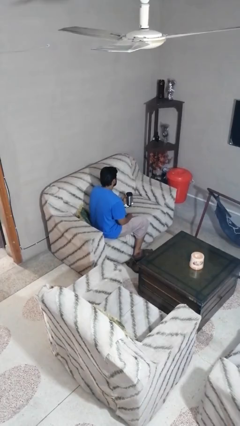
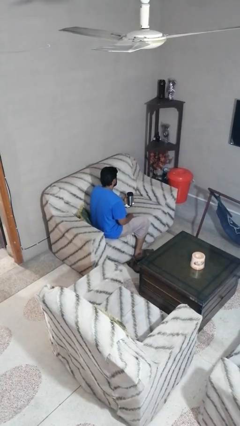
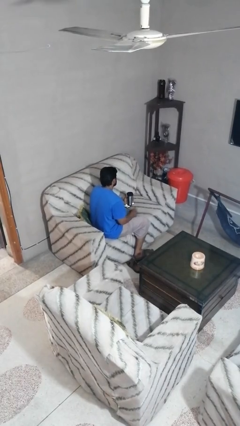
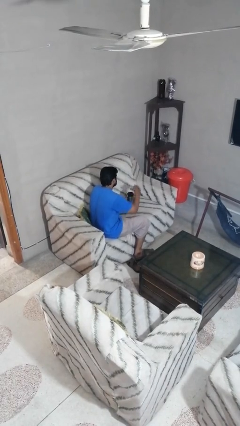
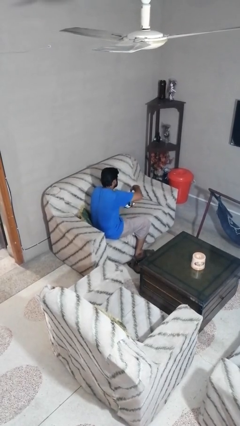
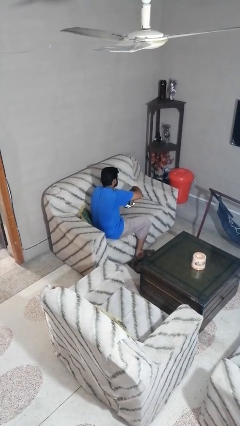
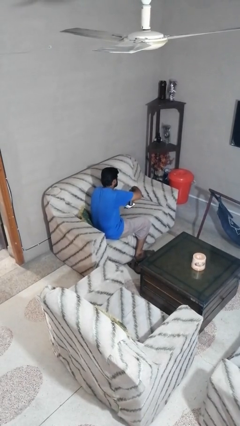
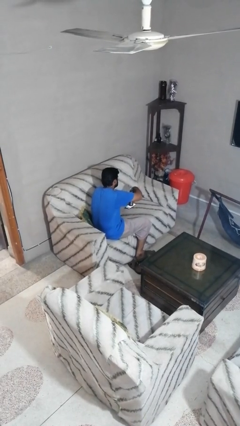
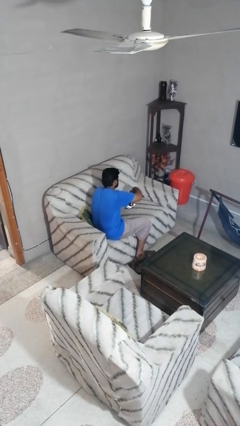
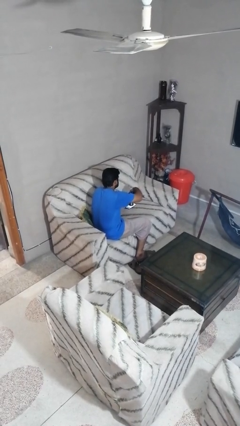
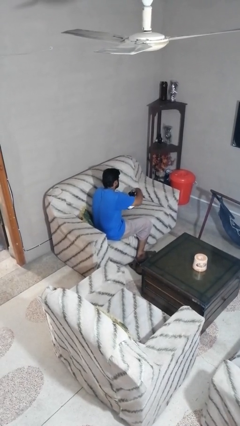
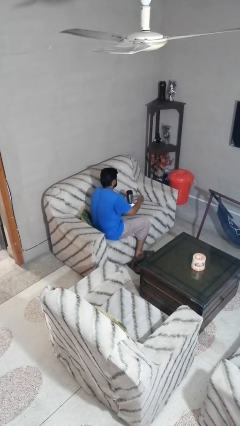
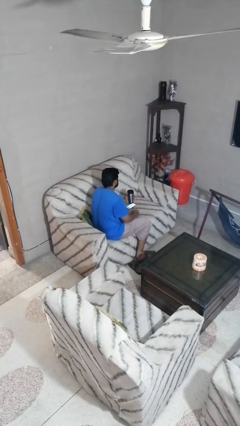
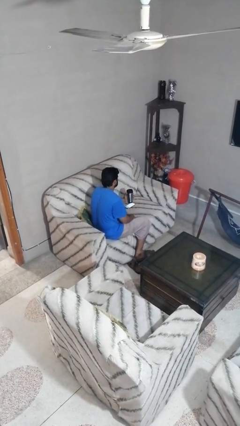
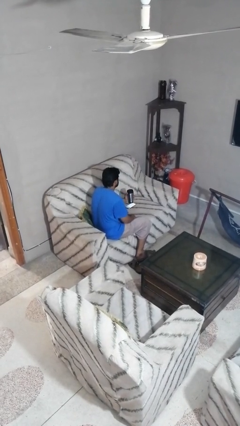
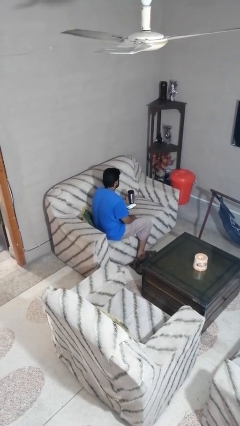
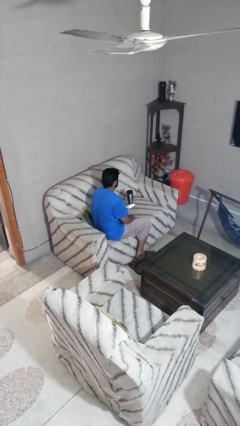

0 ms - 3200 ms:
person opens beverage can

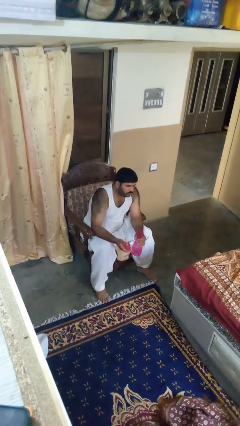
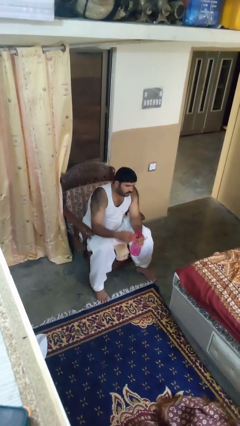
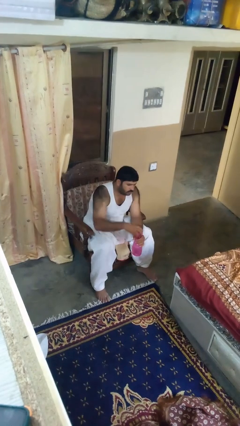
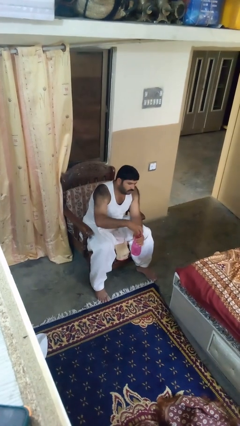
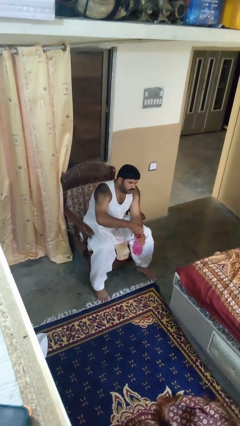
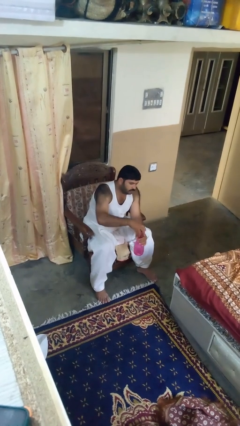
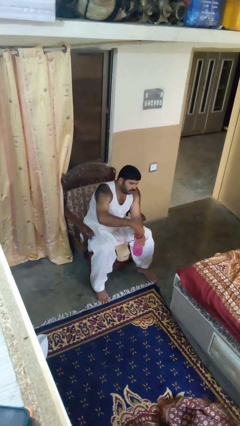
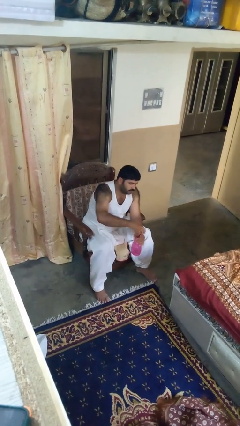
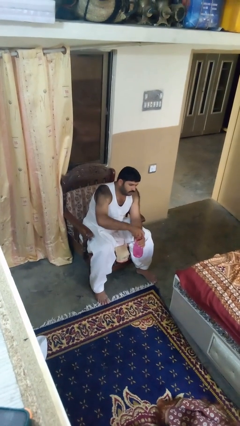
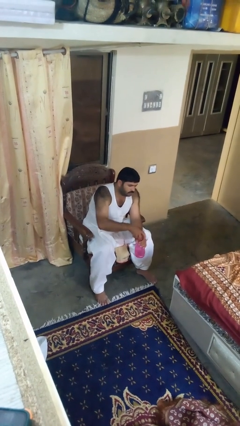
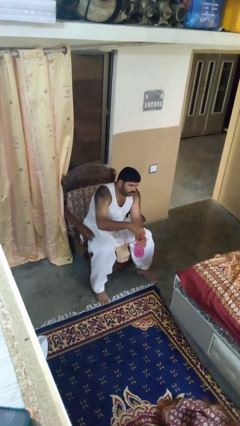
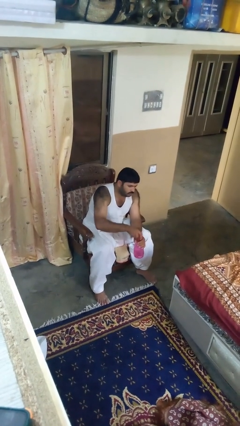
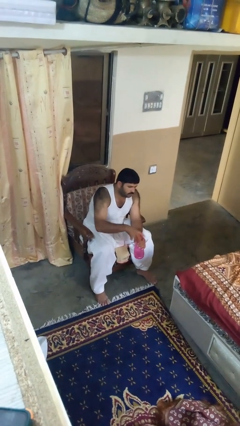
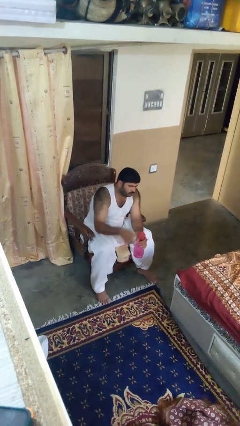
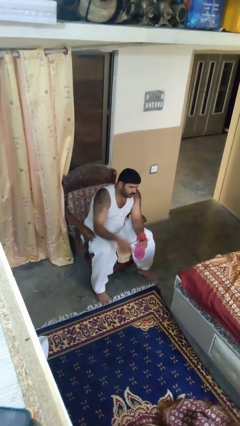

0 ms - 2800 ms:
person screws lid to bottle

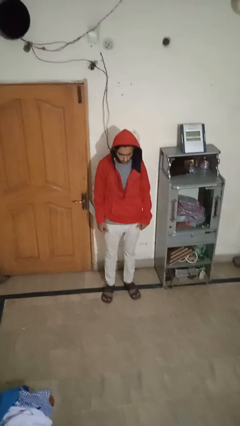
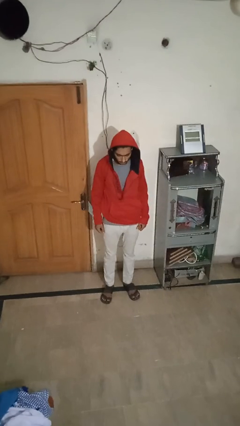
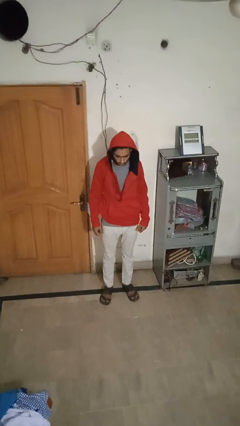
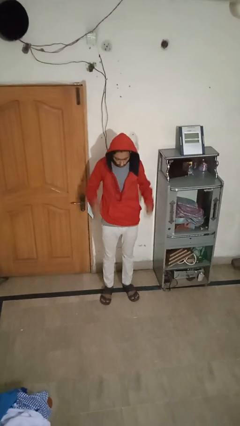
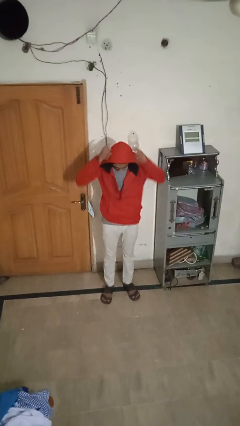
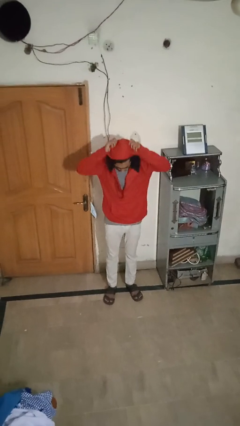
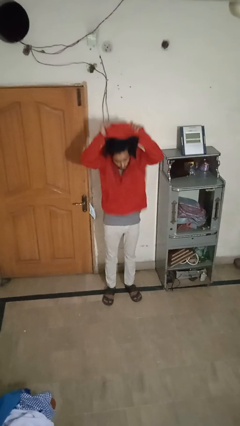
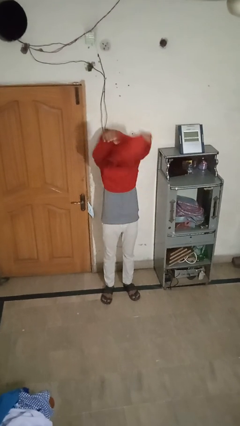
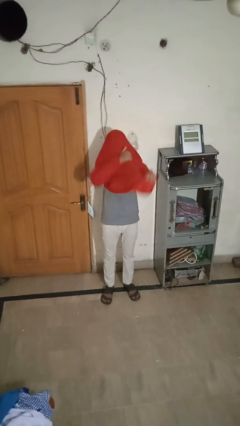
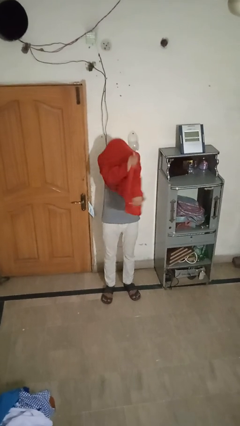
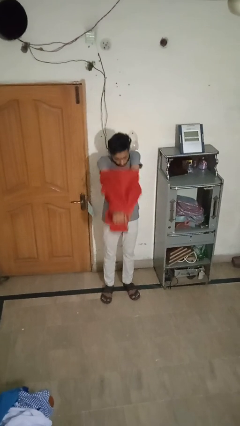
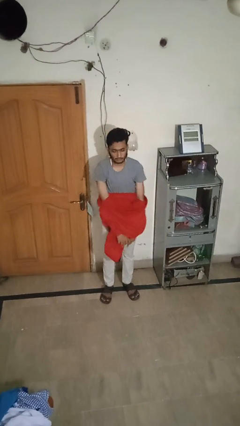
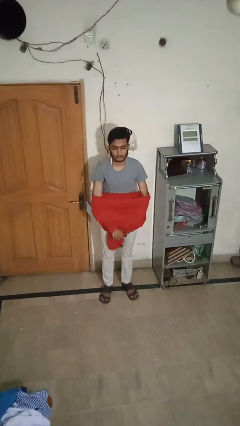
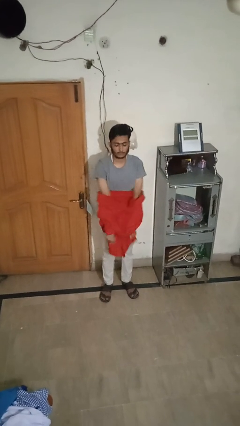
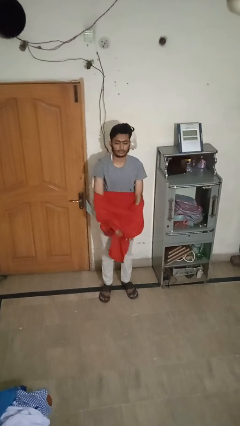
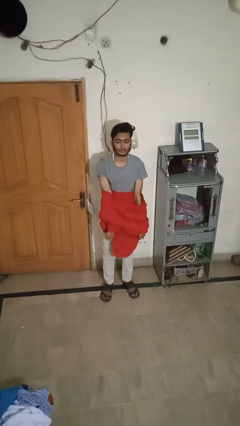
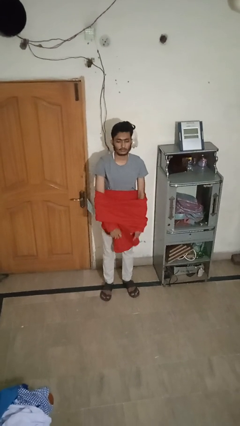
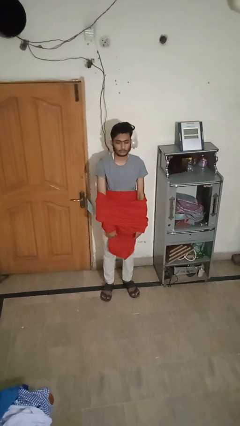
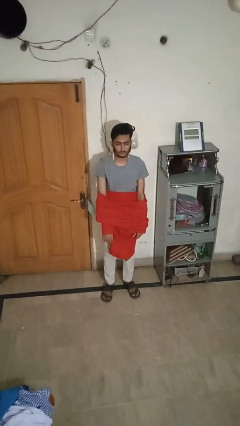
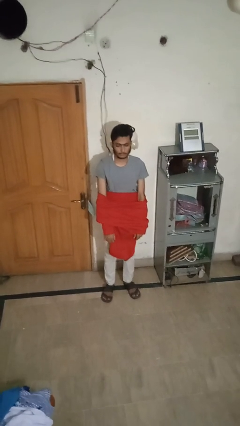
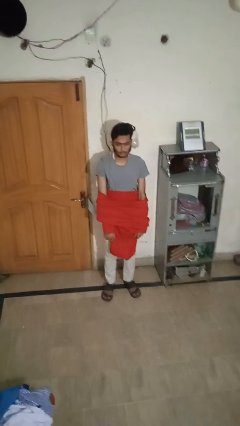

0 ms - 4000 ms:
person takes off hoodie

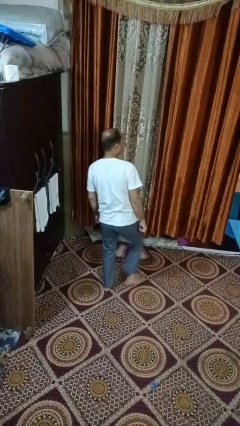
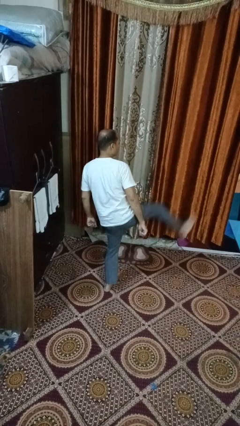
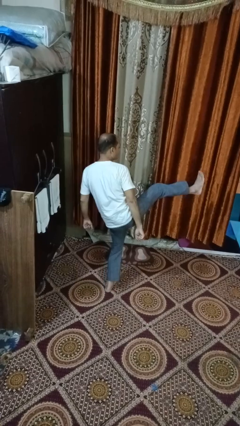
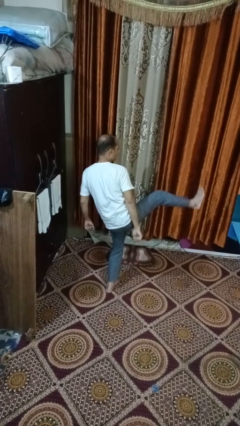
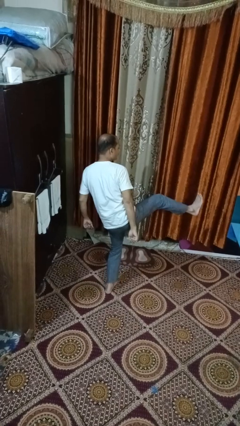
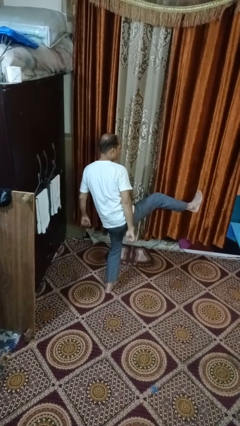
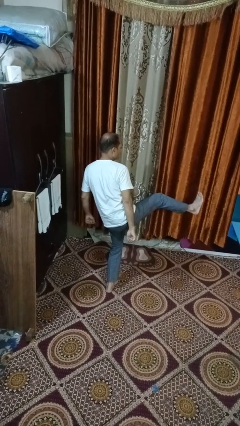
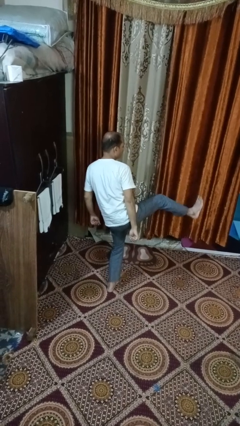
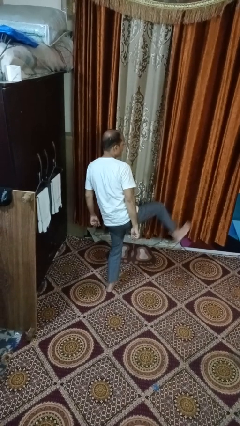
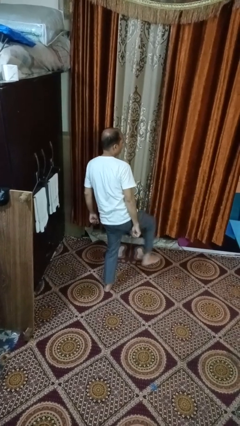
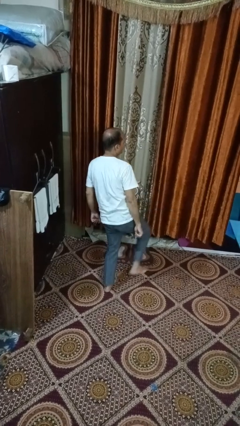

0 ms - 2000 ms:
person karate kicks

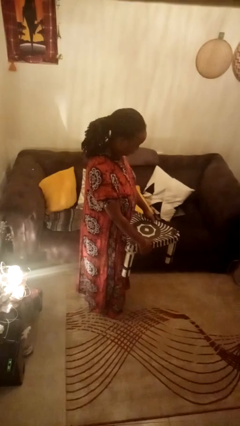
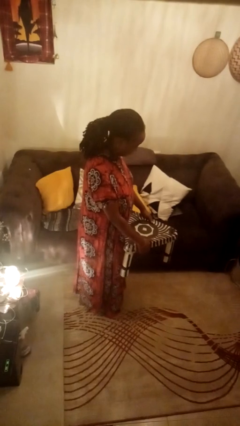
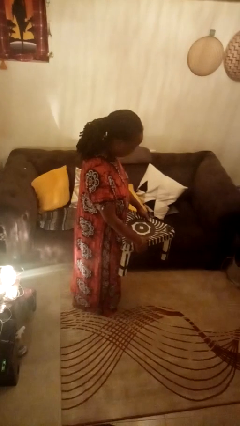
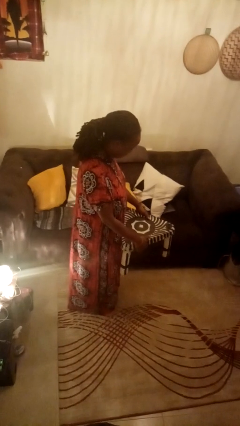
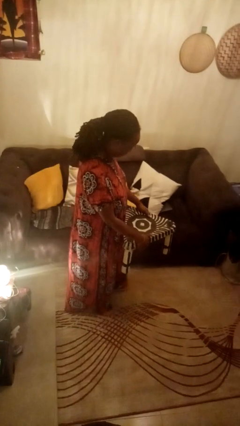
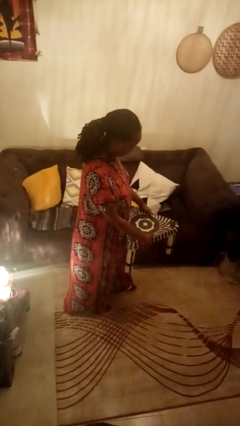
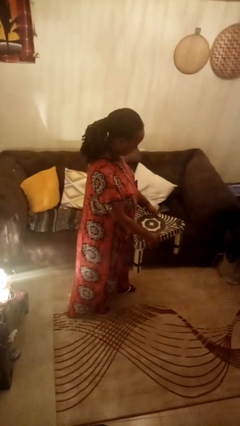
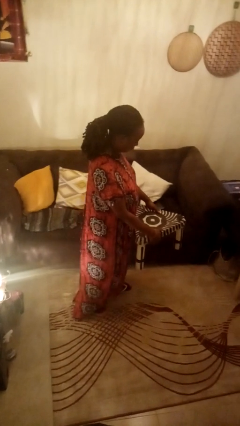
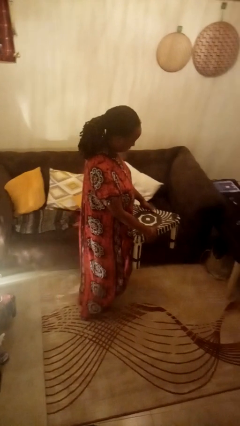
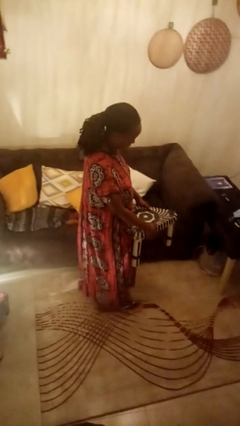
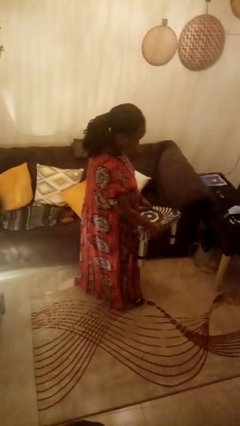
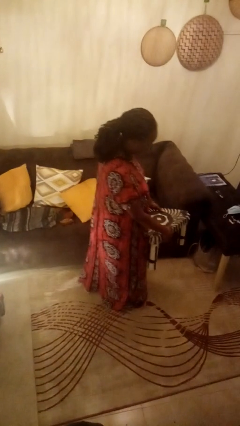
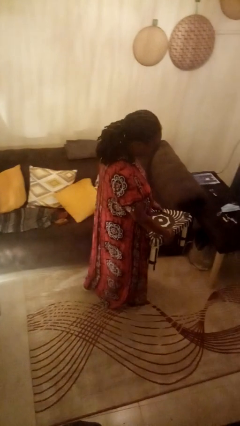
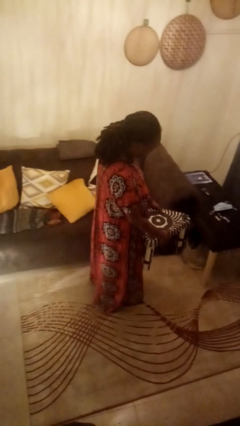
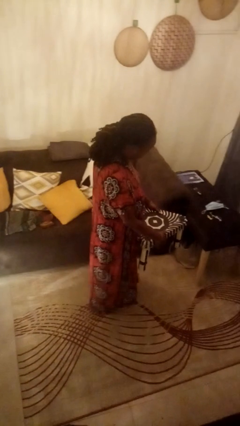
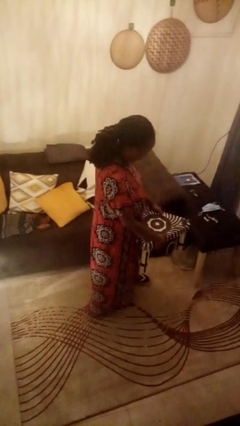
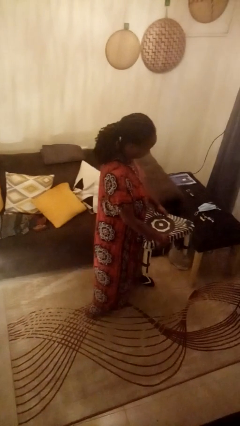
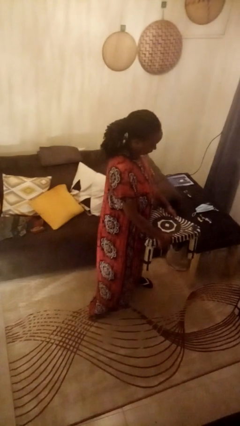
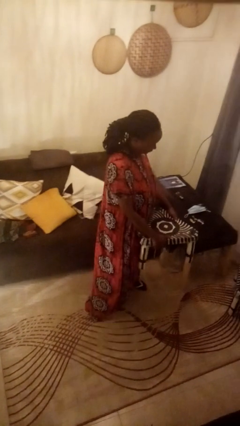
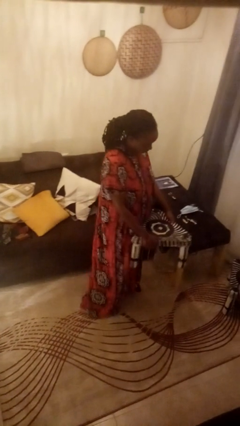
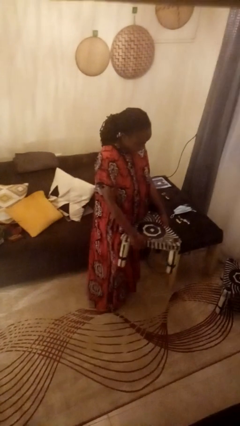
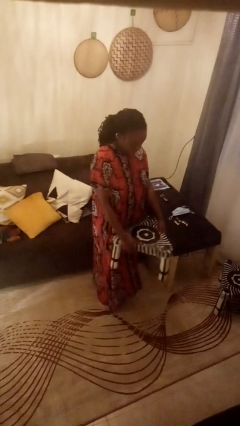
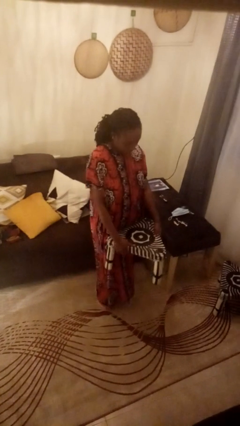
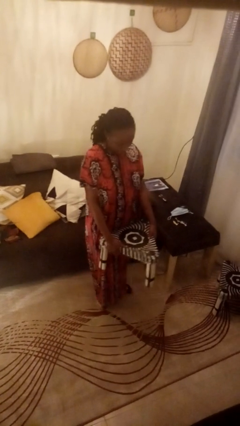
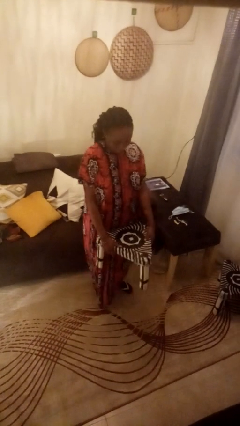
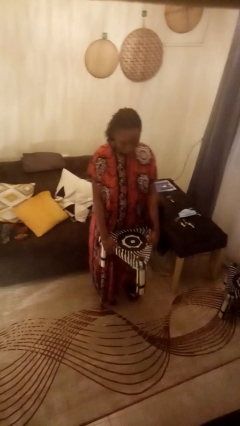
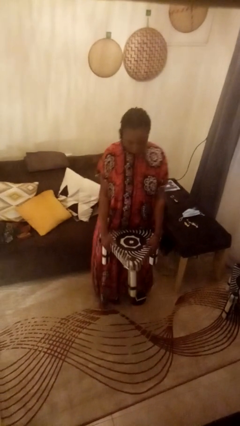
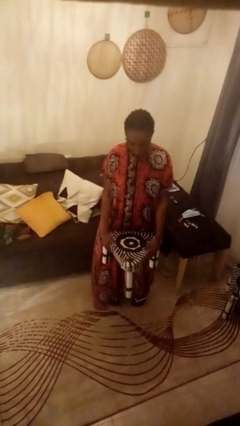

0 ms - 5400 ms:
person carries furniture

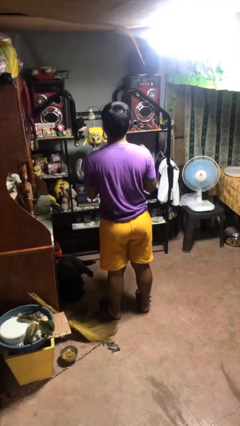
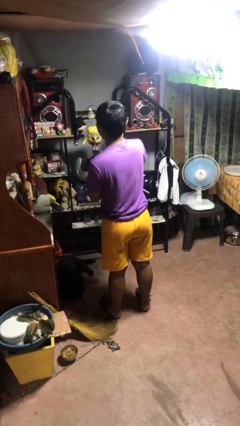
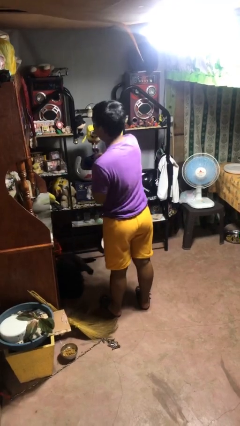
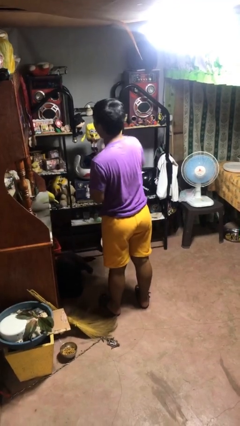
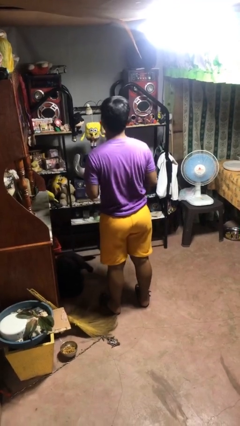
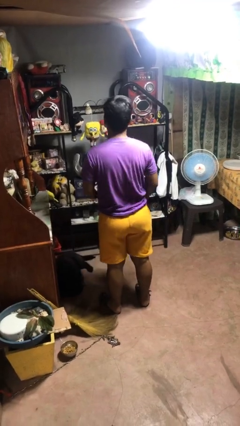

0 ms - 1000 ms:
person punches
